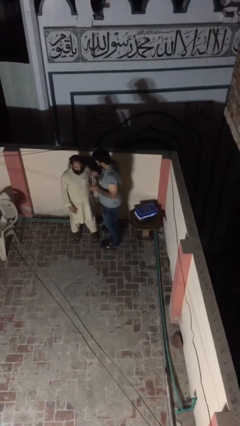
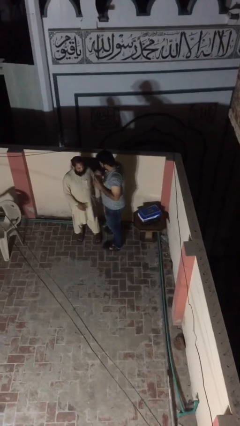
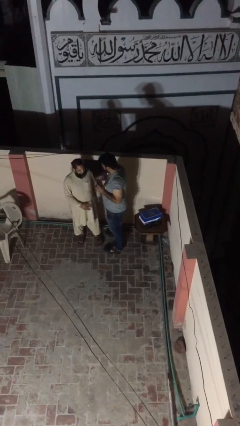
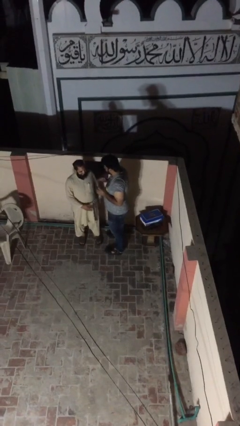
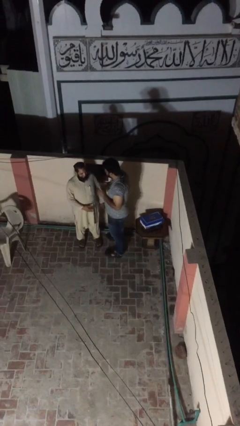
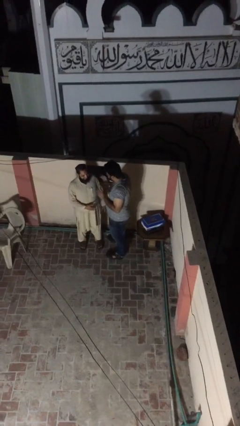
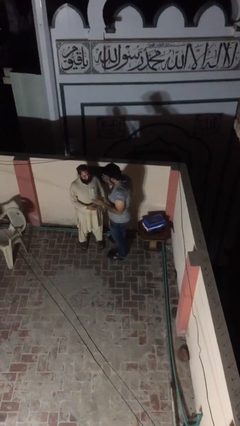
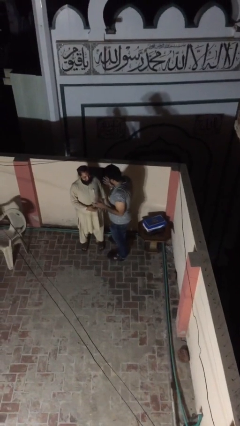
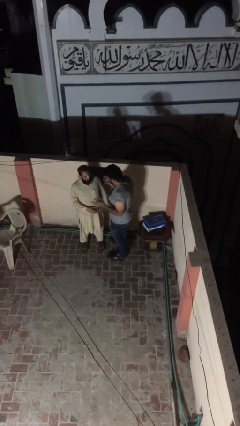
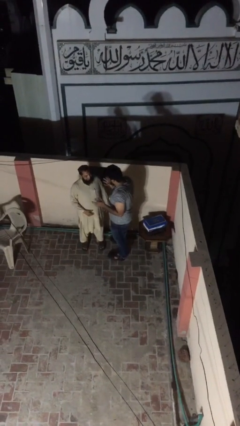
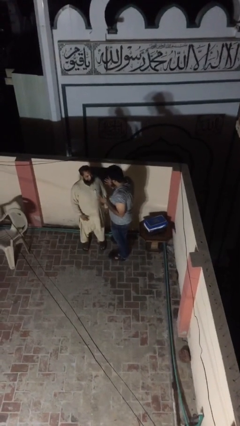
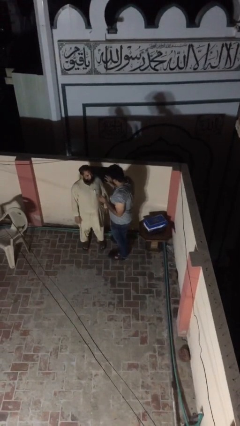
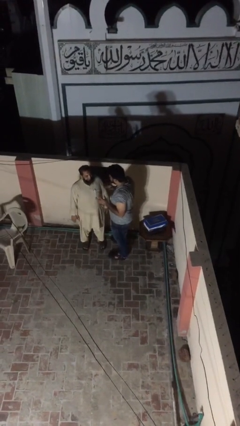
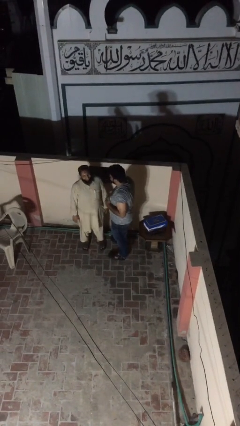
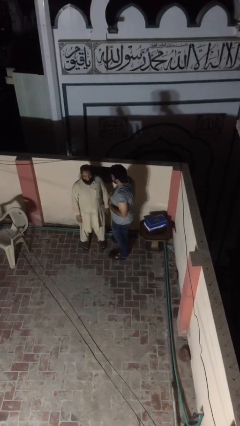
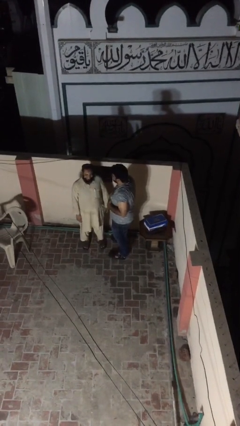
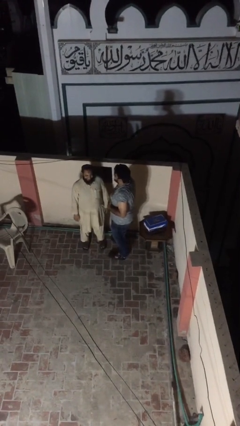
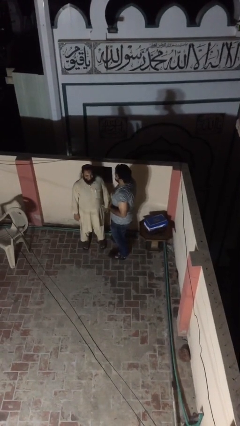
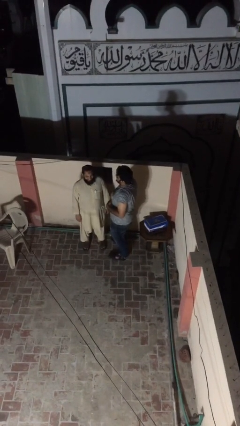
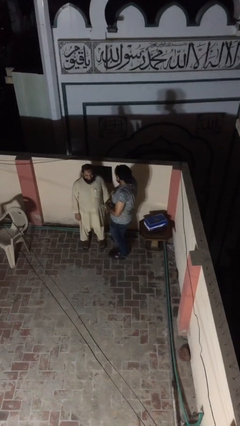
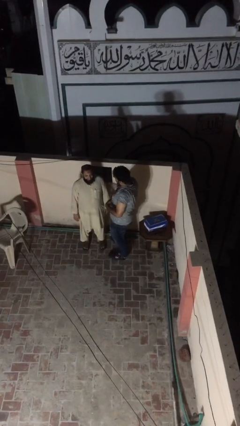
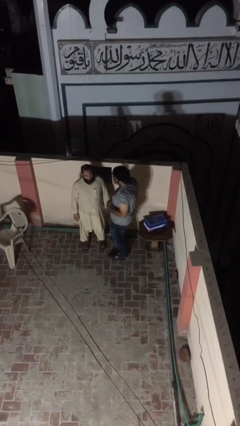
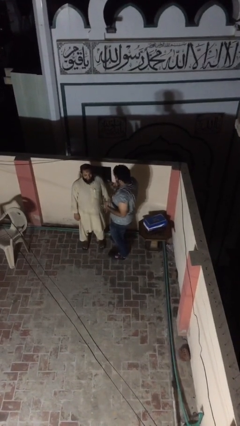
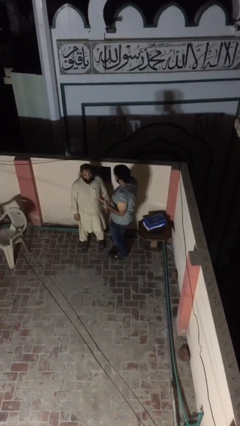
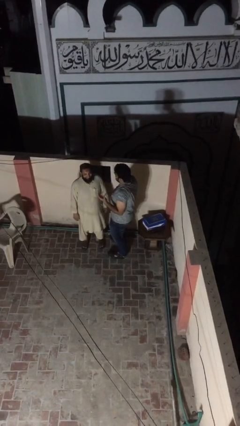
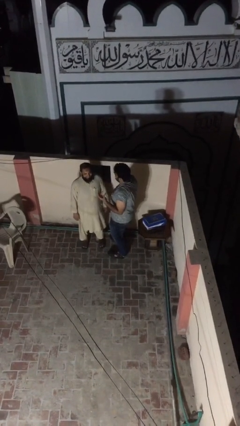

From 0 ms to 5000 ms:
person talks to person

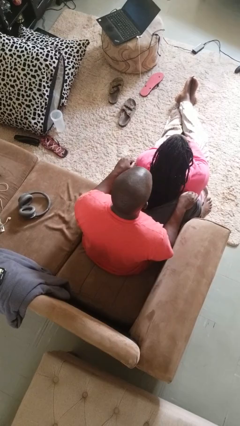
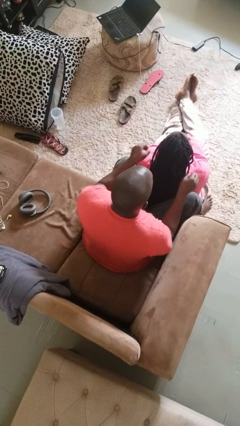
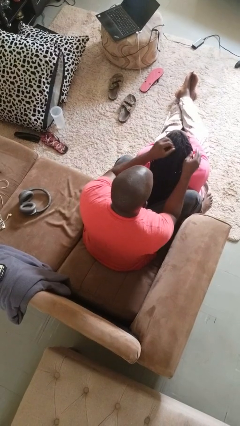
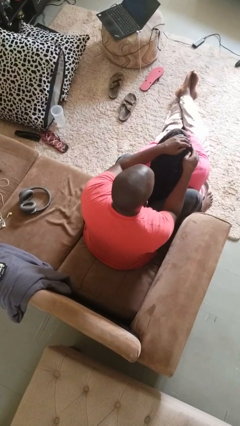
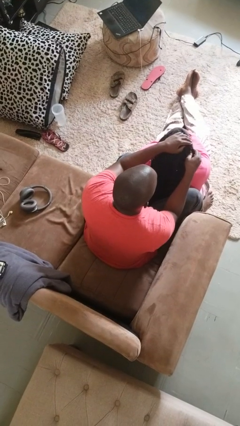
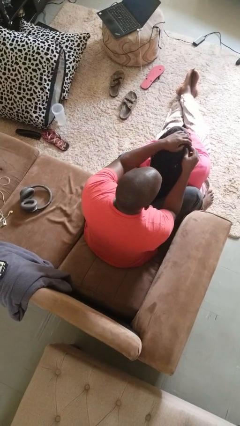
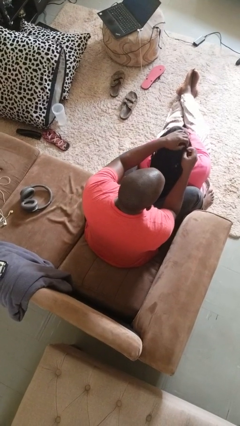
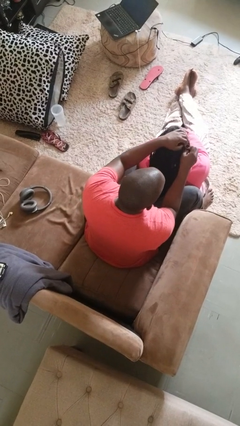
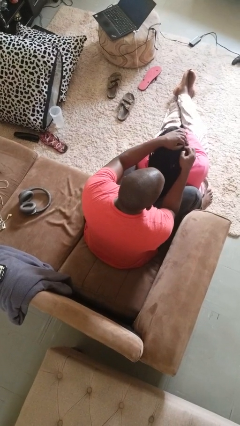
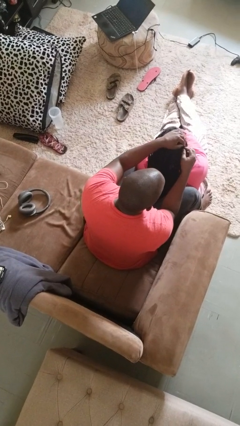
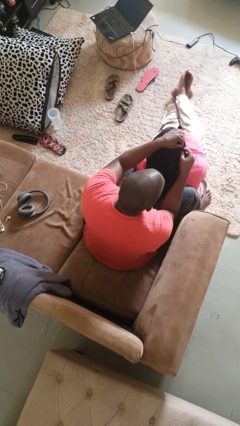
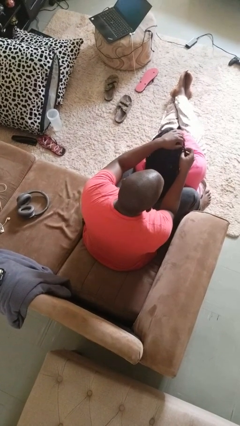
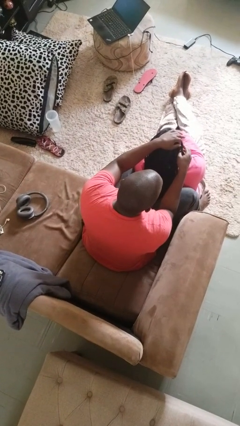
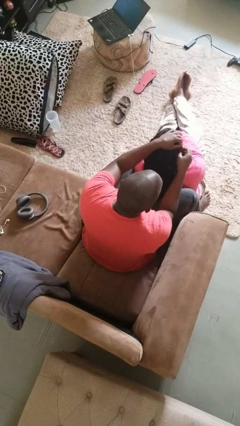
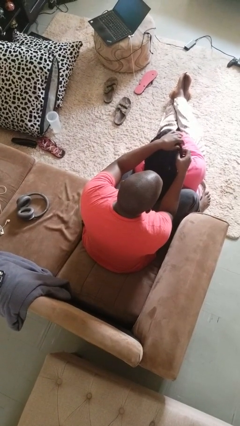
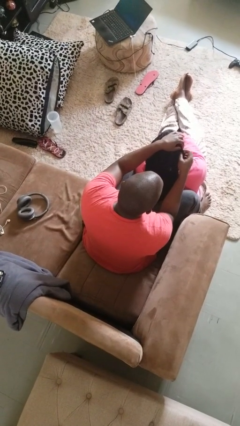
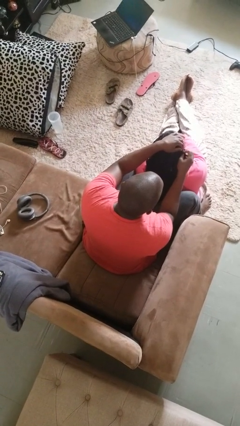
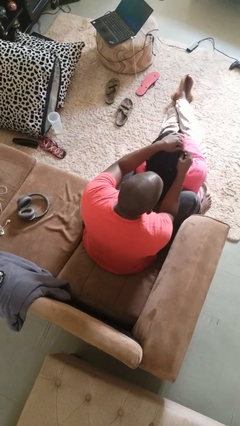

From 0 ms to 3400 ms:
person braids hair of person

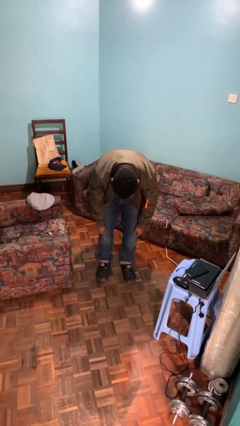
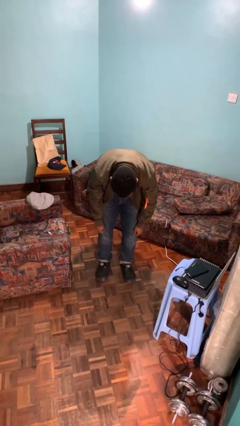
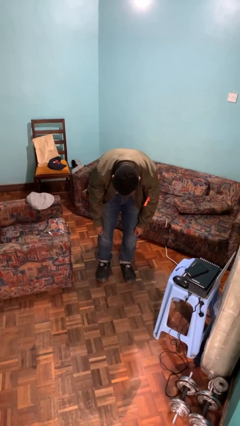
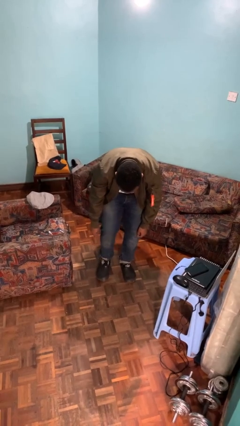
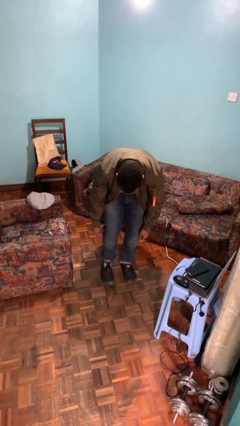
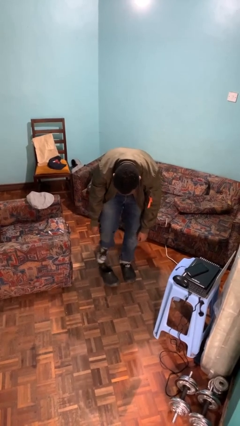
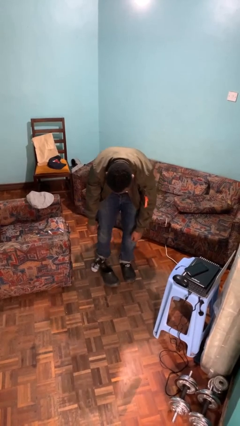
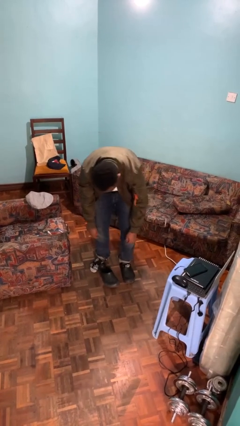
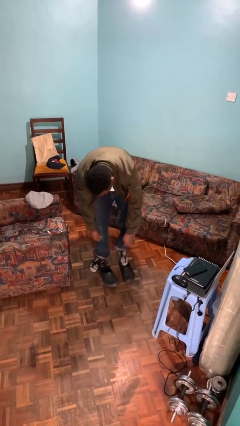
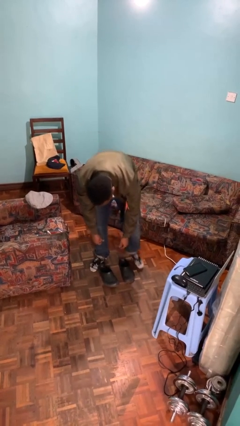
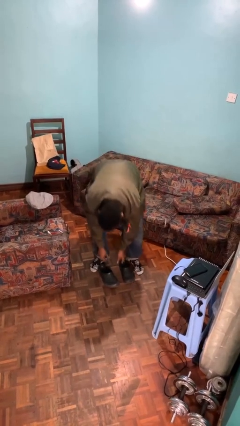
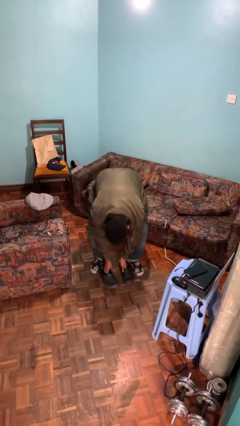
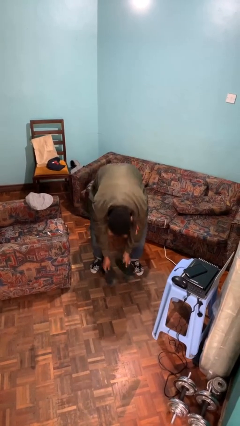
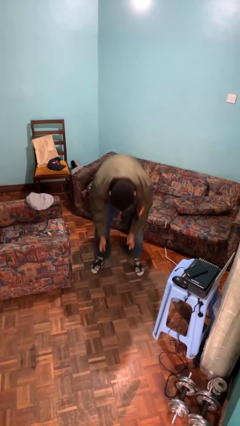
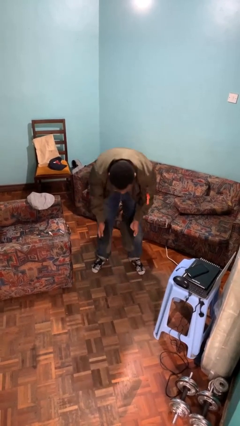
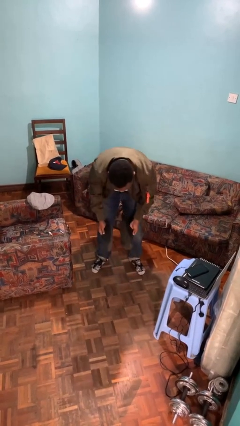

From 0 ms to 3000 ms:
person takes off shoes

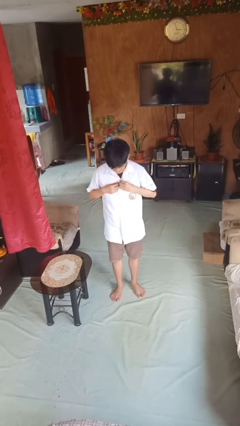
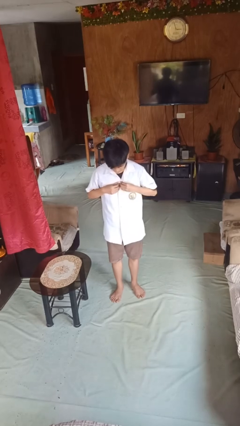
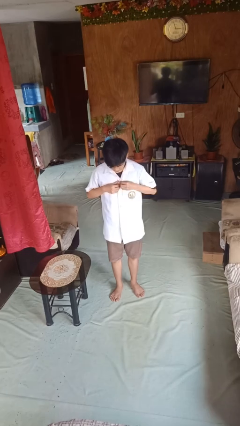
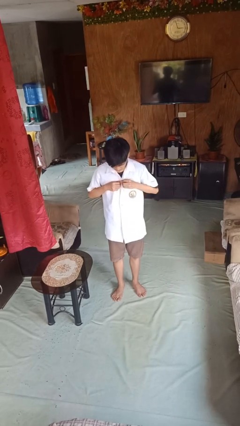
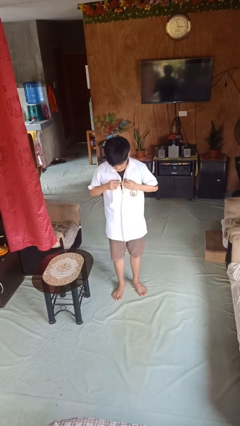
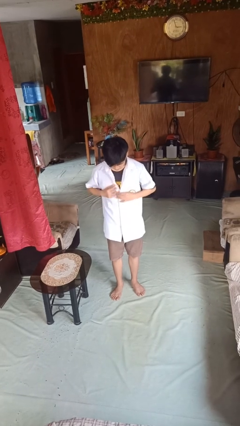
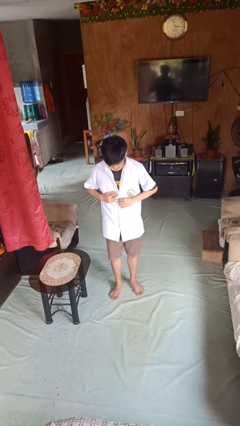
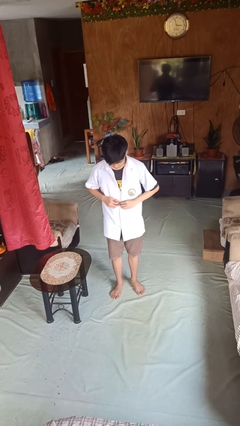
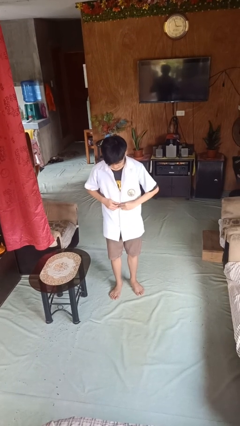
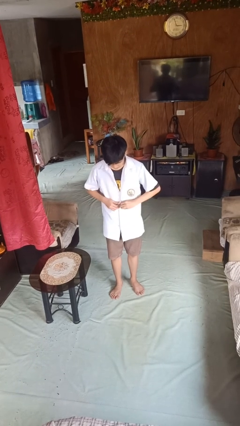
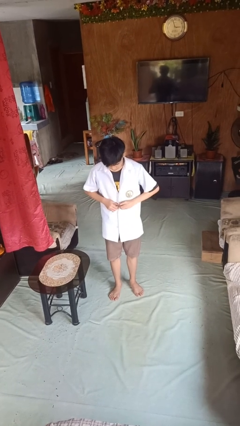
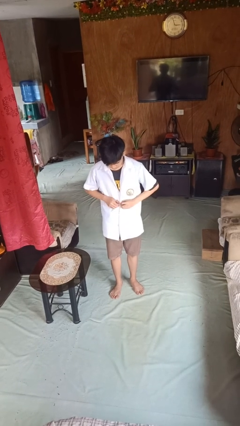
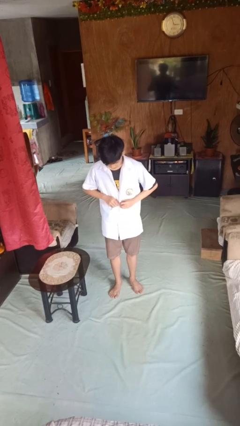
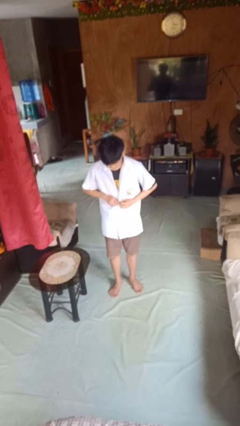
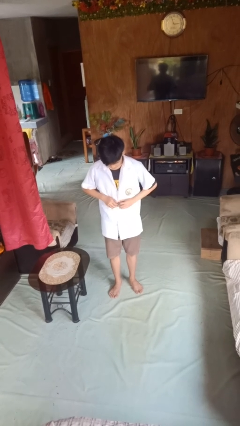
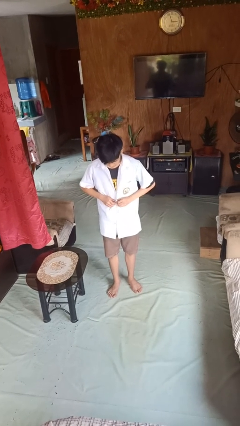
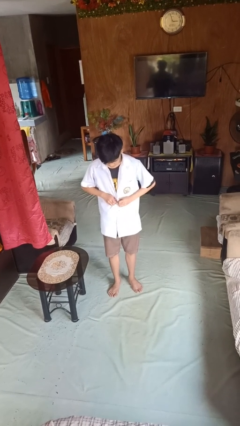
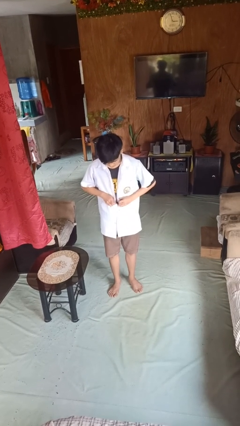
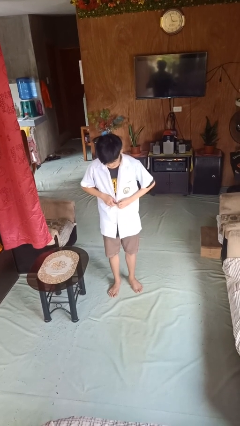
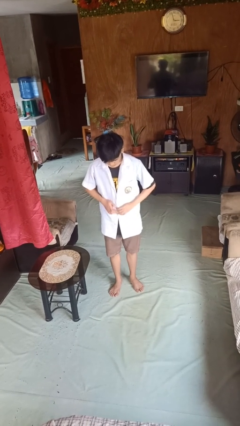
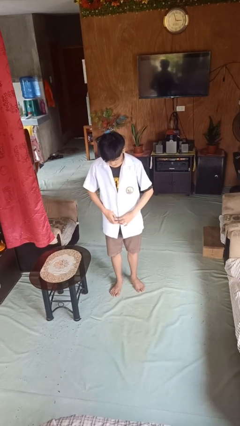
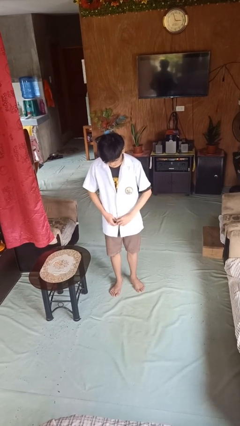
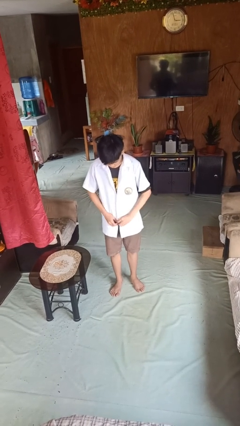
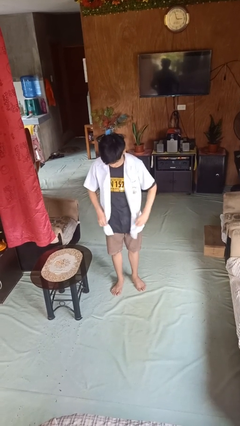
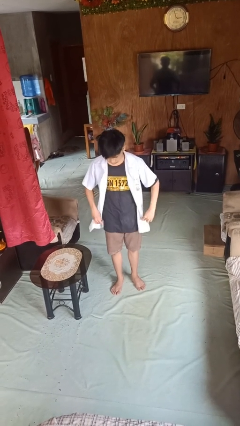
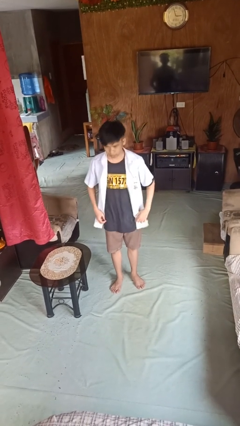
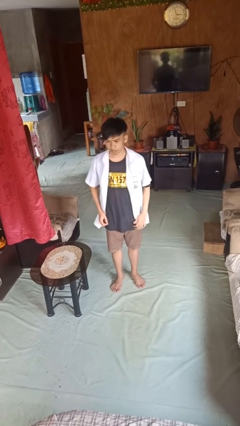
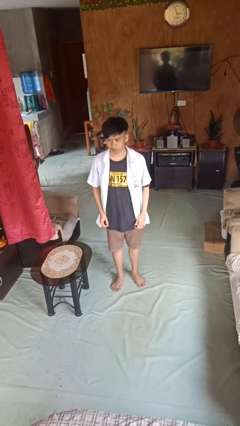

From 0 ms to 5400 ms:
person unbuttons shirt

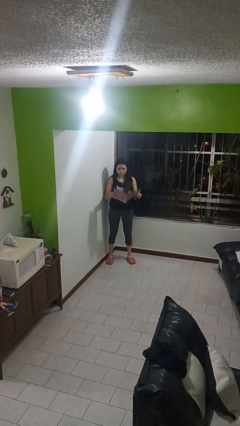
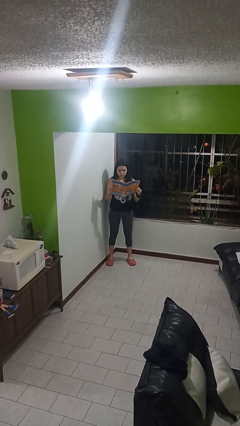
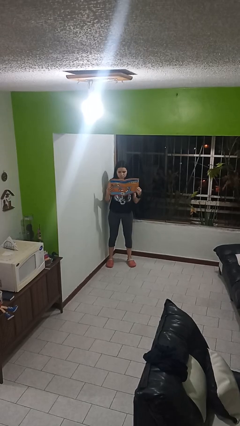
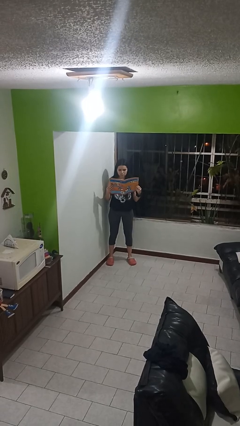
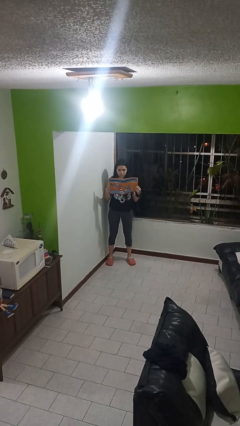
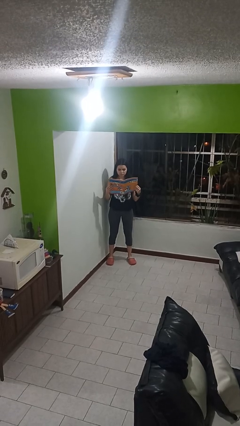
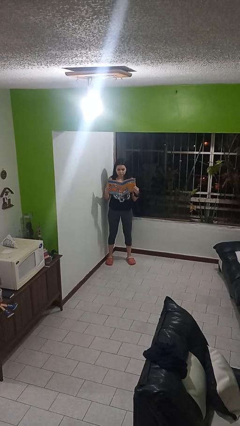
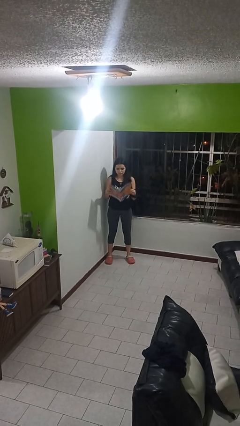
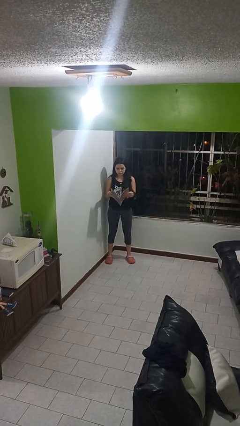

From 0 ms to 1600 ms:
person reads magazine
